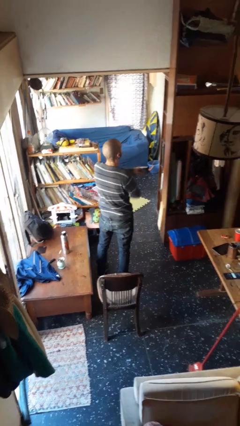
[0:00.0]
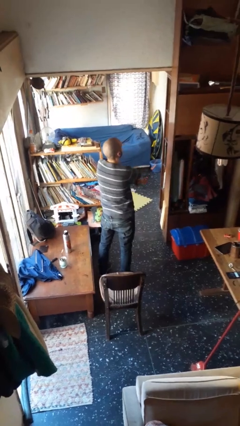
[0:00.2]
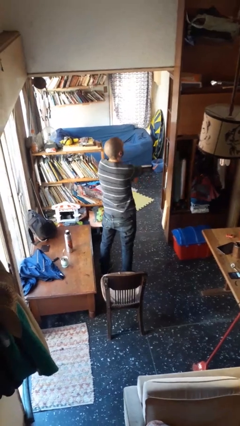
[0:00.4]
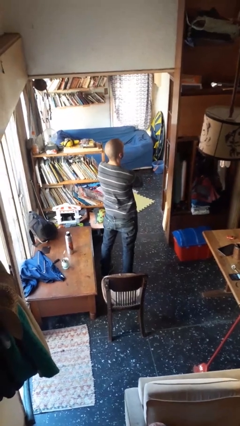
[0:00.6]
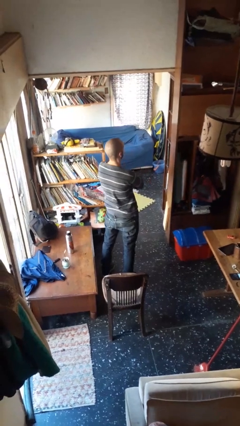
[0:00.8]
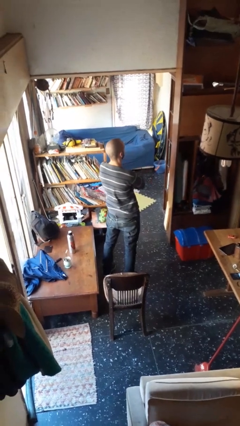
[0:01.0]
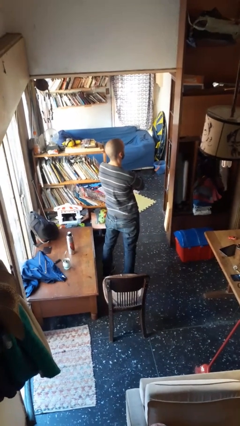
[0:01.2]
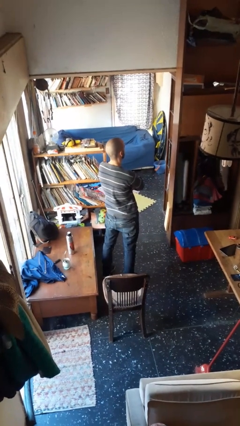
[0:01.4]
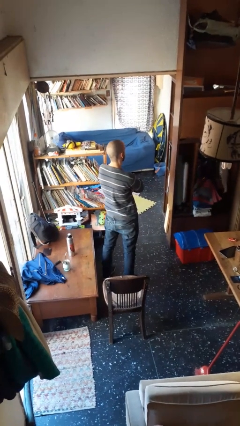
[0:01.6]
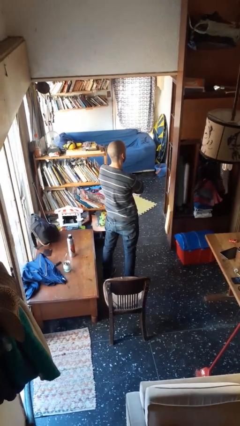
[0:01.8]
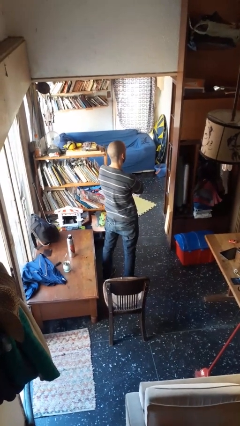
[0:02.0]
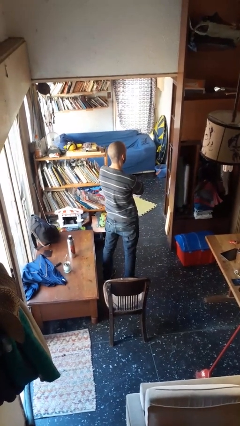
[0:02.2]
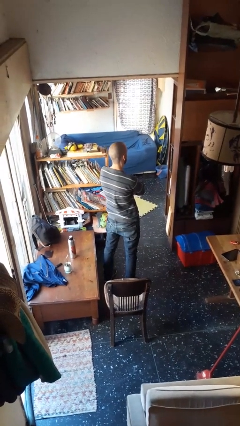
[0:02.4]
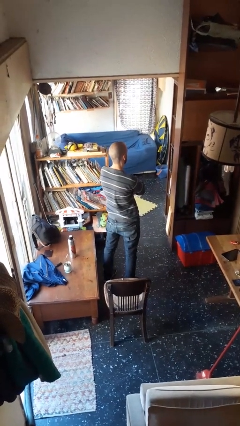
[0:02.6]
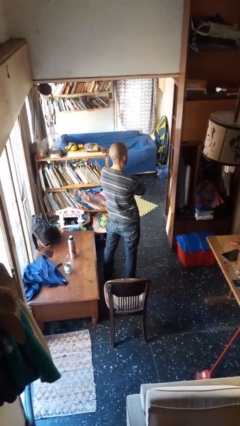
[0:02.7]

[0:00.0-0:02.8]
person crosses arms

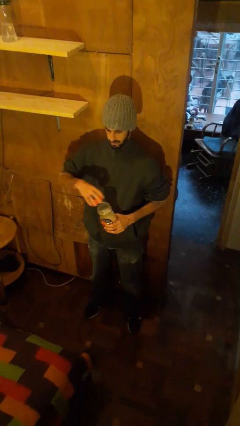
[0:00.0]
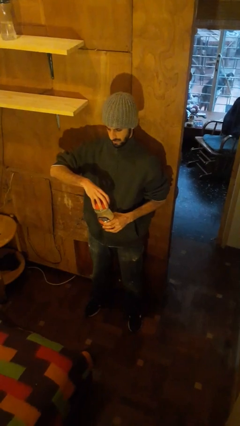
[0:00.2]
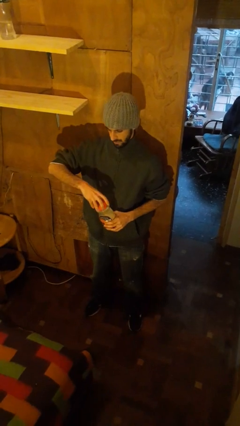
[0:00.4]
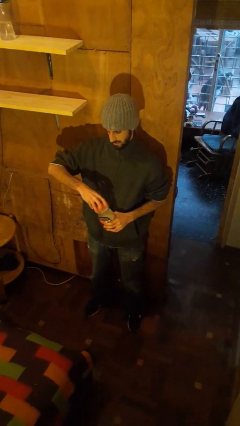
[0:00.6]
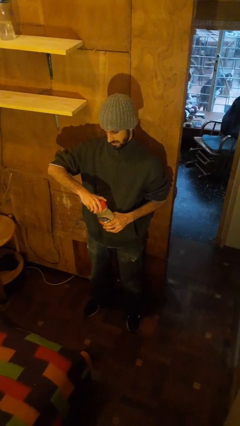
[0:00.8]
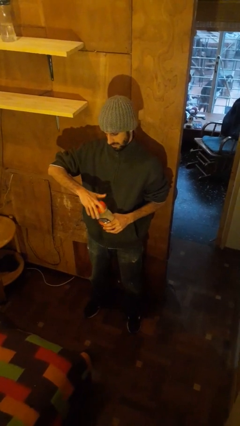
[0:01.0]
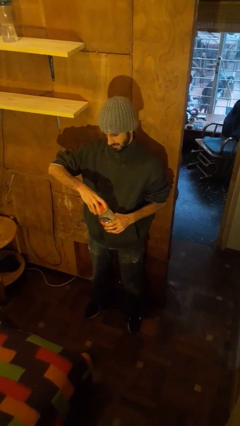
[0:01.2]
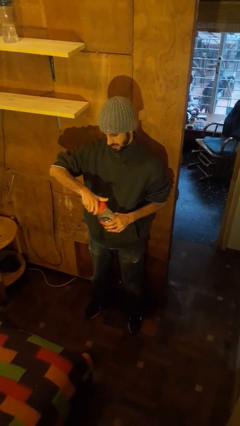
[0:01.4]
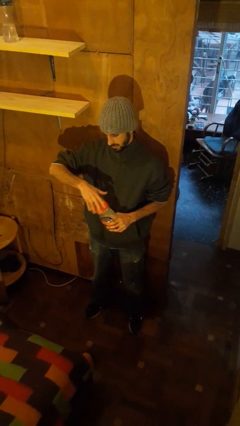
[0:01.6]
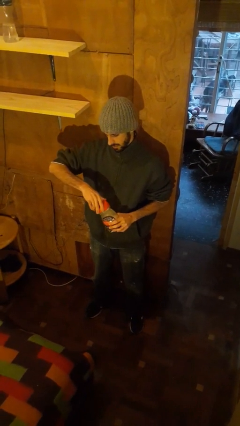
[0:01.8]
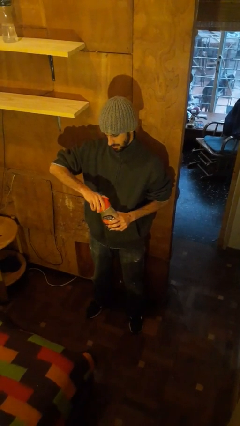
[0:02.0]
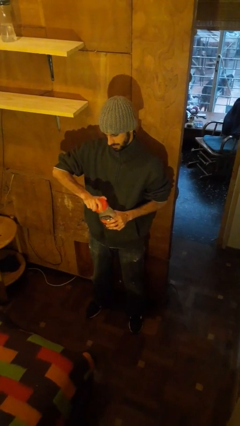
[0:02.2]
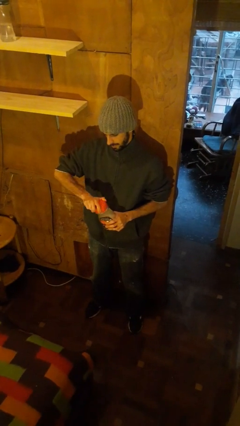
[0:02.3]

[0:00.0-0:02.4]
person closes jar

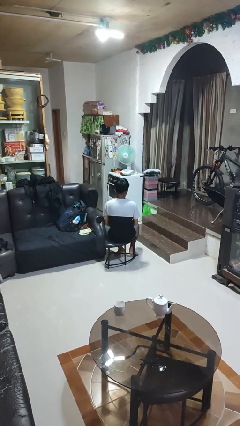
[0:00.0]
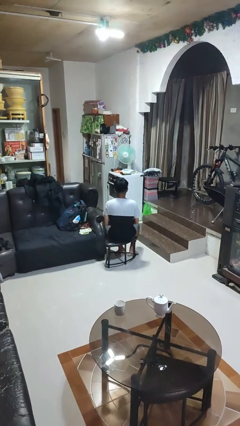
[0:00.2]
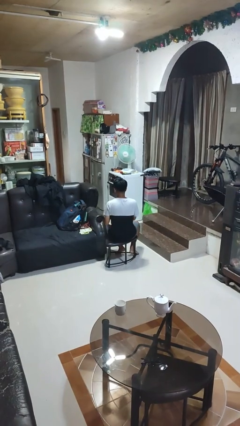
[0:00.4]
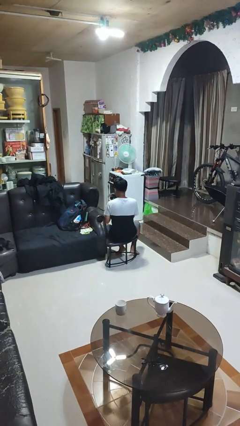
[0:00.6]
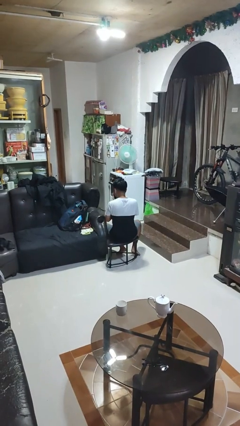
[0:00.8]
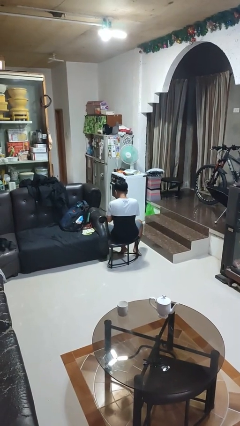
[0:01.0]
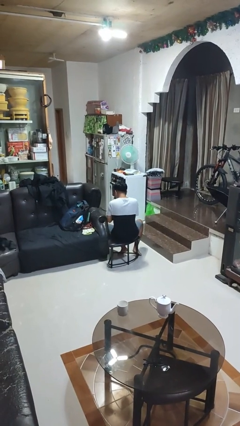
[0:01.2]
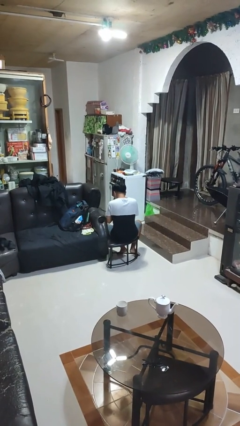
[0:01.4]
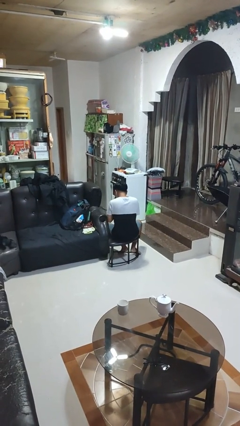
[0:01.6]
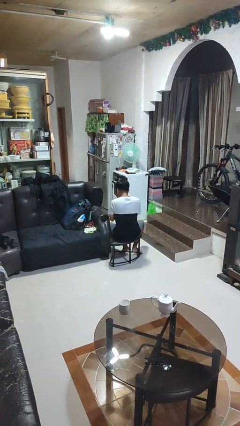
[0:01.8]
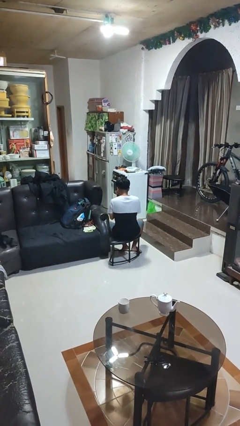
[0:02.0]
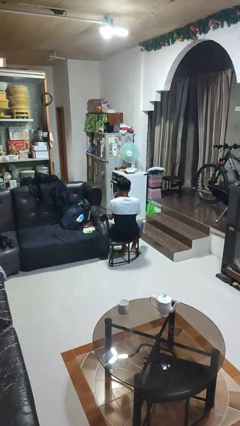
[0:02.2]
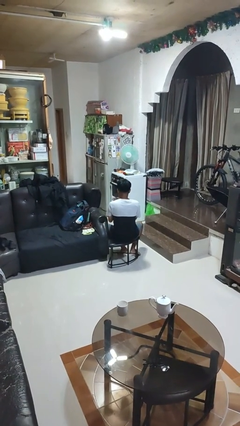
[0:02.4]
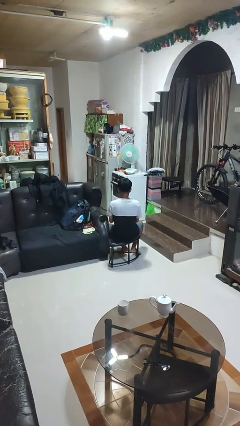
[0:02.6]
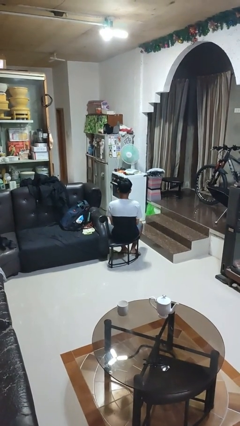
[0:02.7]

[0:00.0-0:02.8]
person blows nose

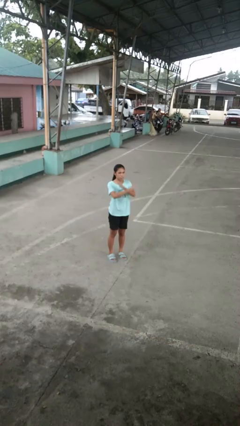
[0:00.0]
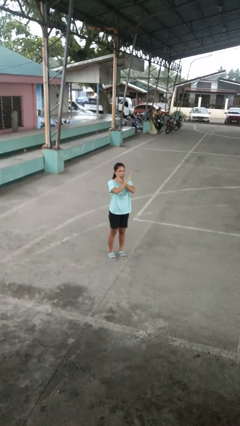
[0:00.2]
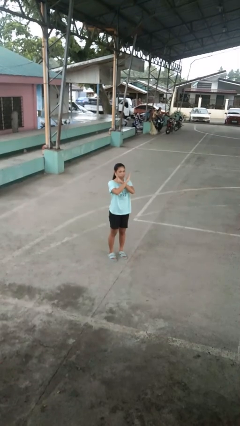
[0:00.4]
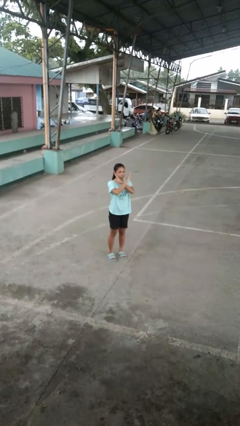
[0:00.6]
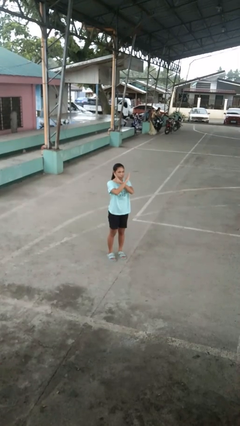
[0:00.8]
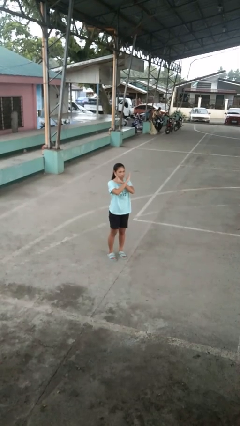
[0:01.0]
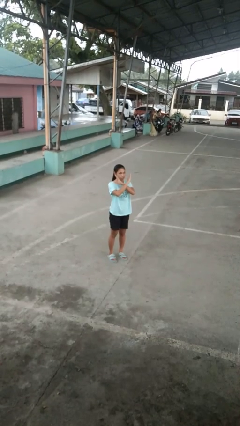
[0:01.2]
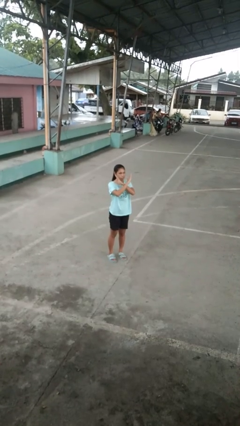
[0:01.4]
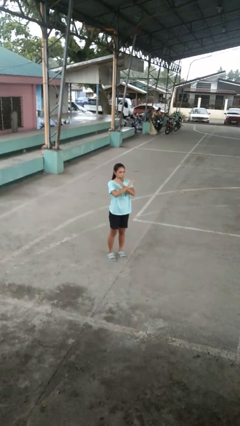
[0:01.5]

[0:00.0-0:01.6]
person gestures arms x

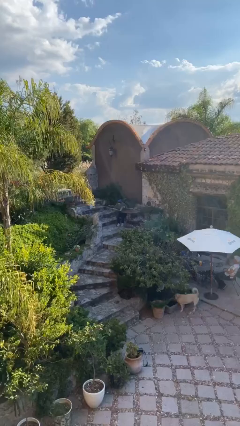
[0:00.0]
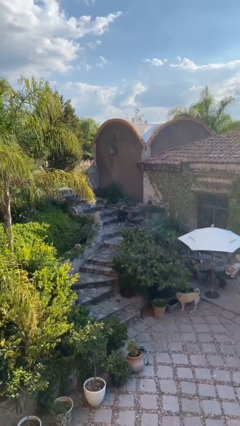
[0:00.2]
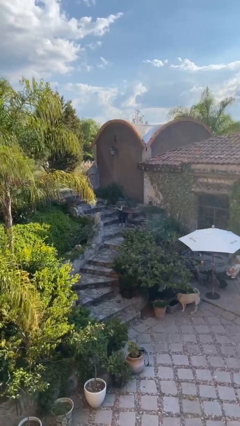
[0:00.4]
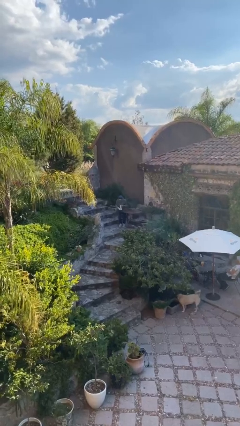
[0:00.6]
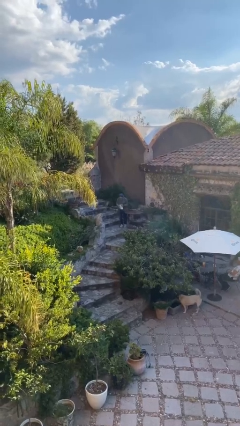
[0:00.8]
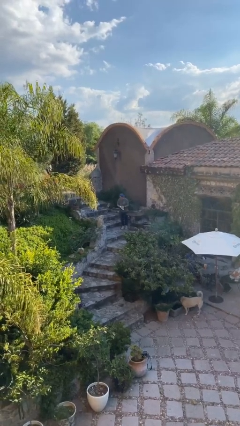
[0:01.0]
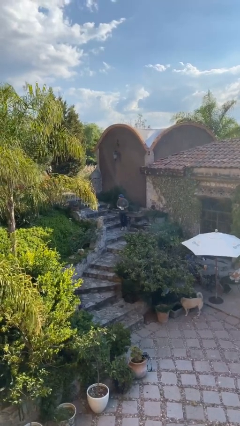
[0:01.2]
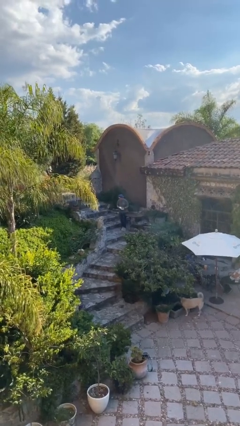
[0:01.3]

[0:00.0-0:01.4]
person stands up

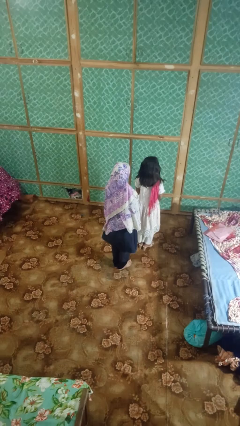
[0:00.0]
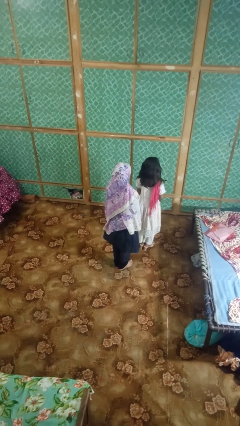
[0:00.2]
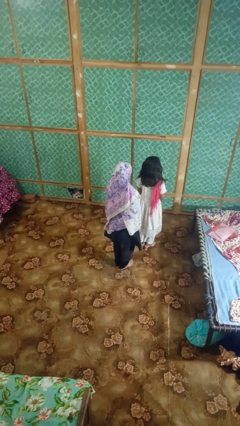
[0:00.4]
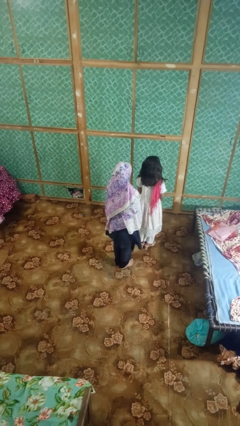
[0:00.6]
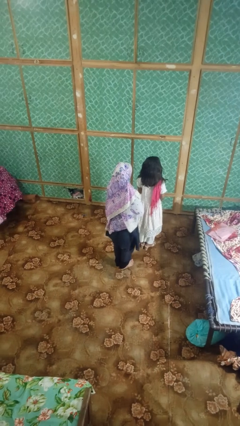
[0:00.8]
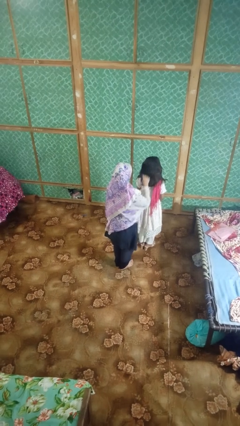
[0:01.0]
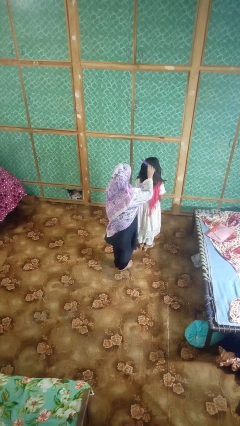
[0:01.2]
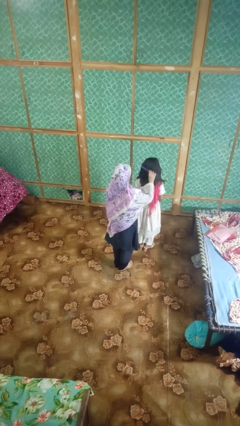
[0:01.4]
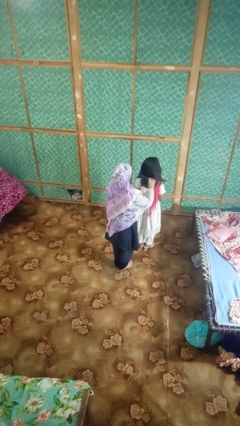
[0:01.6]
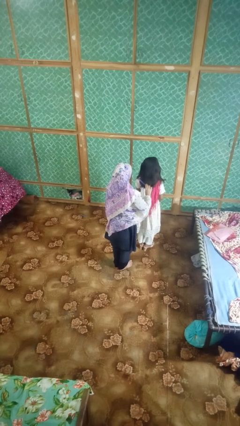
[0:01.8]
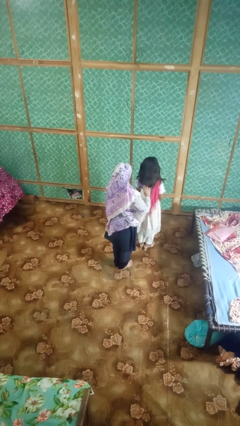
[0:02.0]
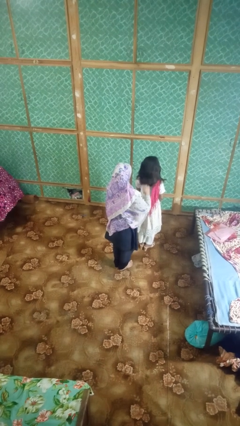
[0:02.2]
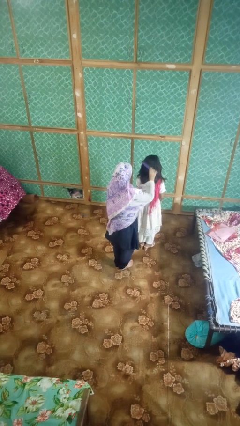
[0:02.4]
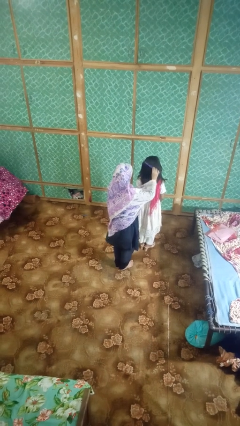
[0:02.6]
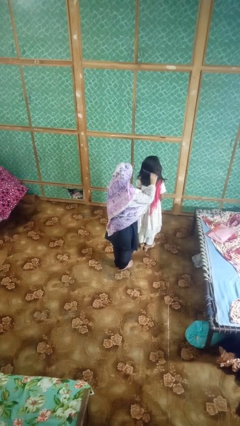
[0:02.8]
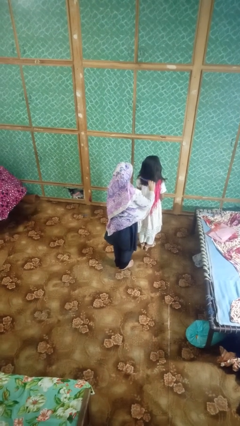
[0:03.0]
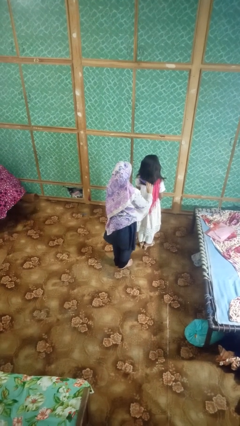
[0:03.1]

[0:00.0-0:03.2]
person brushes hair of person

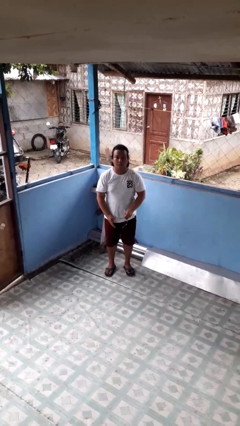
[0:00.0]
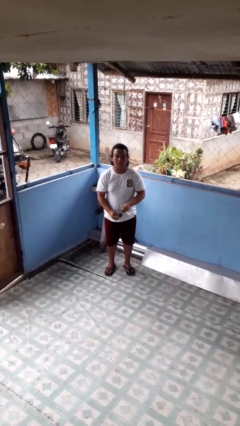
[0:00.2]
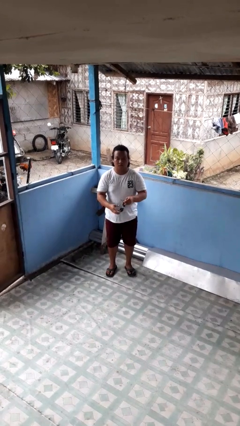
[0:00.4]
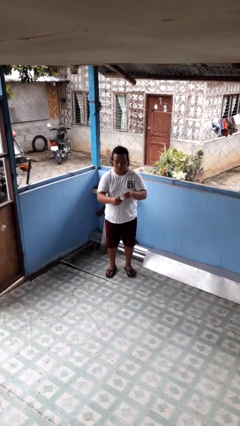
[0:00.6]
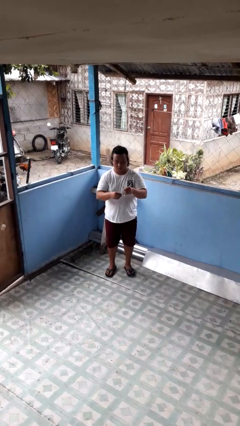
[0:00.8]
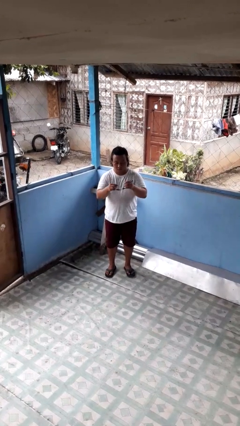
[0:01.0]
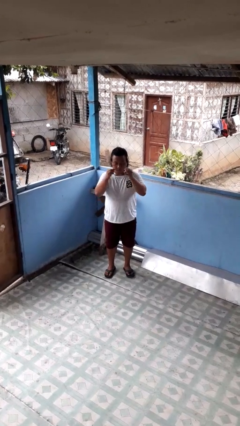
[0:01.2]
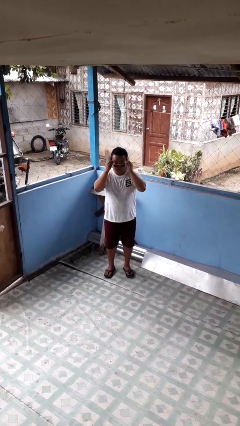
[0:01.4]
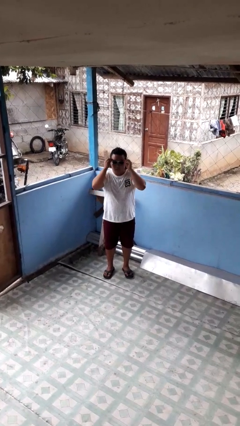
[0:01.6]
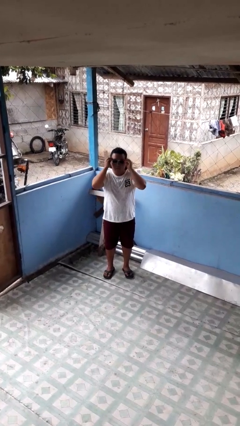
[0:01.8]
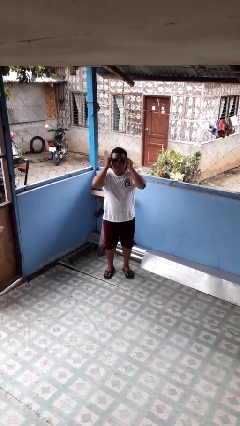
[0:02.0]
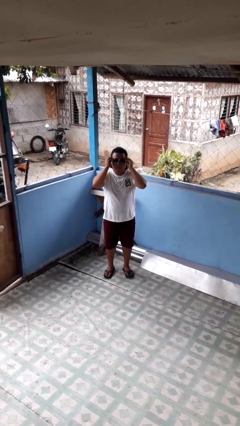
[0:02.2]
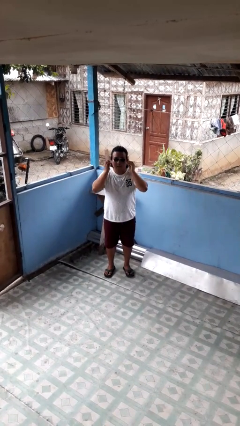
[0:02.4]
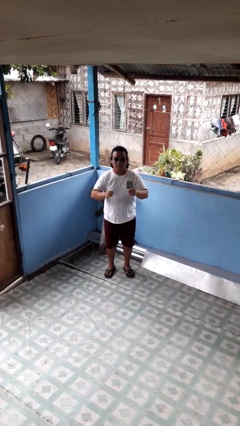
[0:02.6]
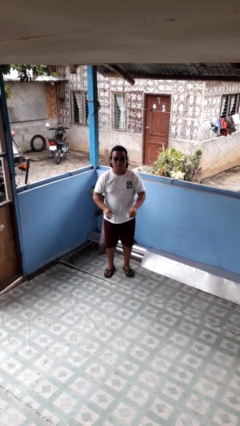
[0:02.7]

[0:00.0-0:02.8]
person puts on sunglasses
